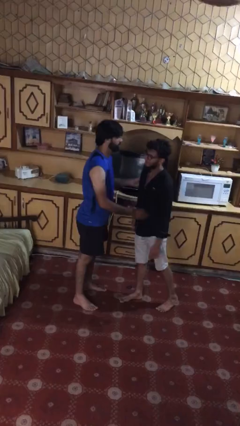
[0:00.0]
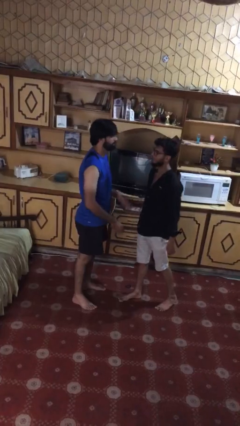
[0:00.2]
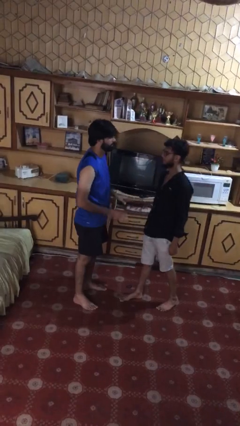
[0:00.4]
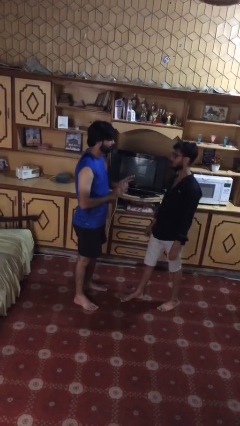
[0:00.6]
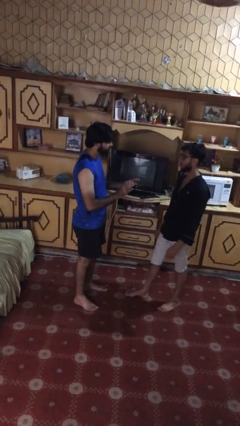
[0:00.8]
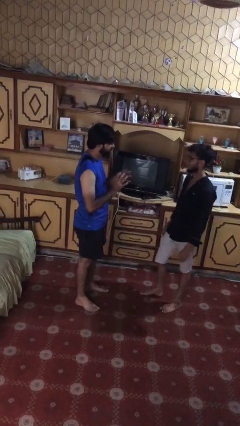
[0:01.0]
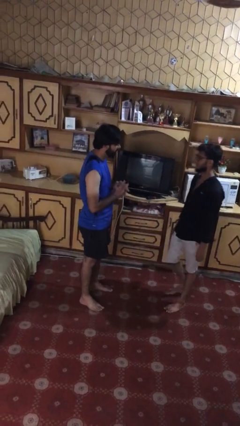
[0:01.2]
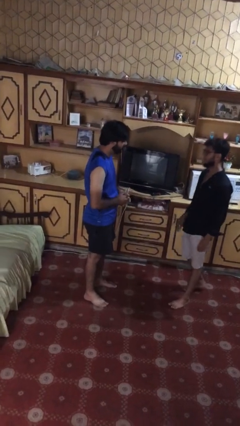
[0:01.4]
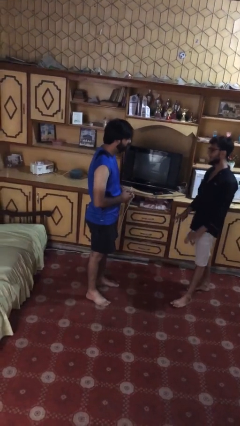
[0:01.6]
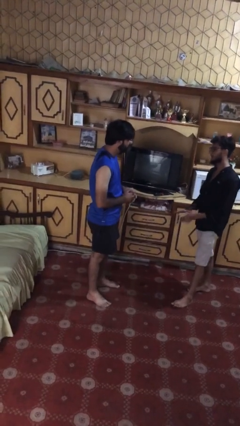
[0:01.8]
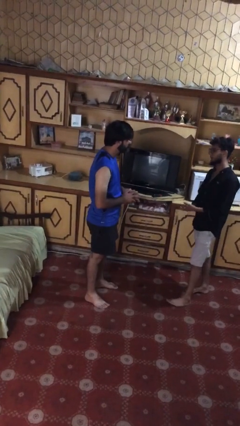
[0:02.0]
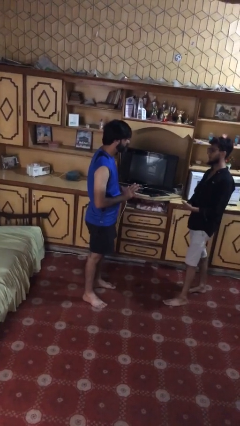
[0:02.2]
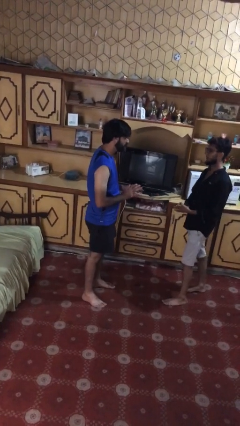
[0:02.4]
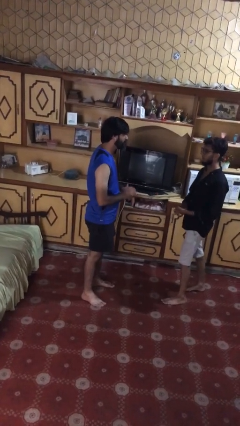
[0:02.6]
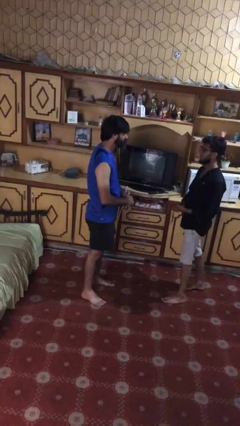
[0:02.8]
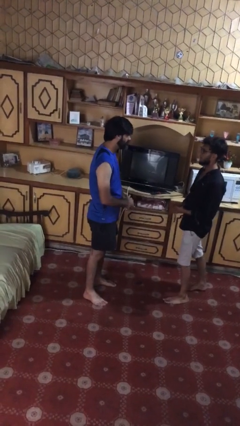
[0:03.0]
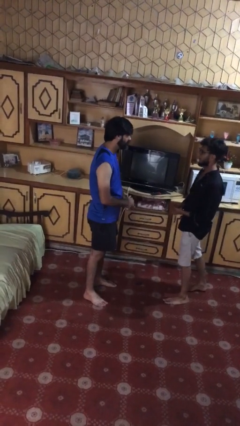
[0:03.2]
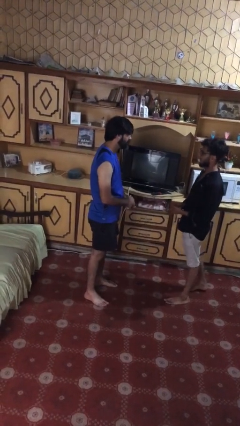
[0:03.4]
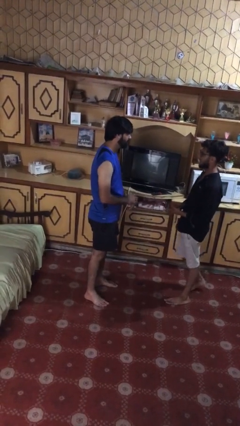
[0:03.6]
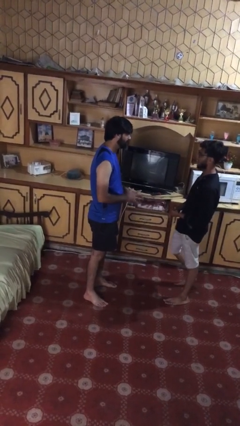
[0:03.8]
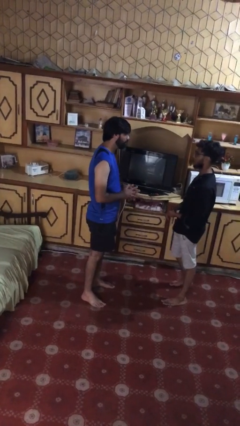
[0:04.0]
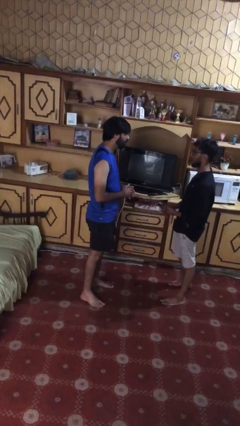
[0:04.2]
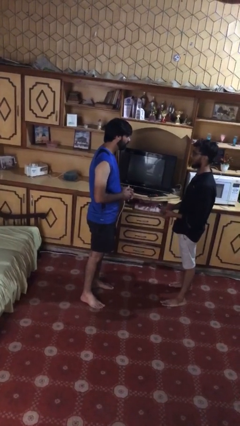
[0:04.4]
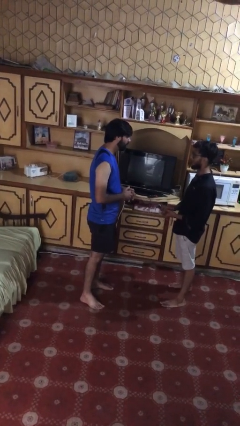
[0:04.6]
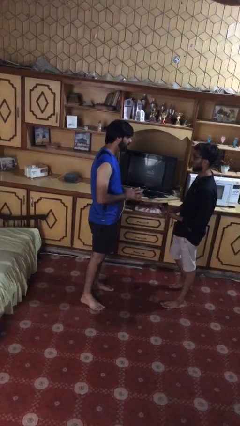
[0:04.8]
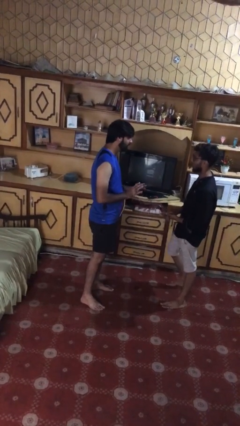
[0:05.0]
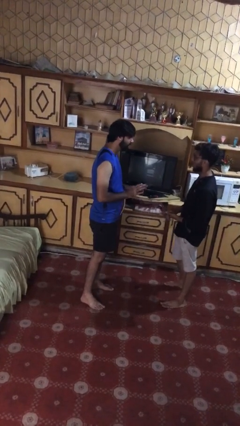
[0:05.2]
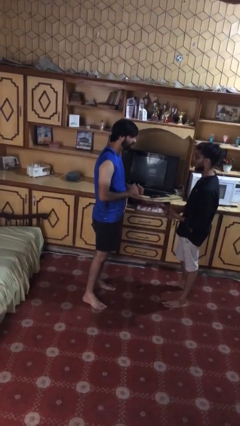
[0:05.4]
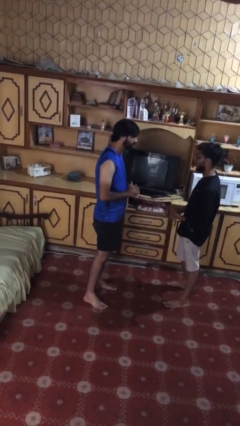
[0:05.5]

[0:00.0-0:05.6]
person talks to person

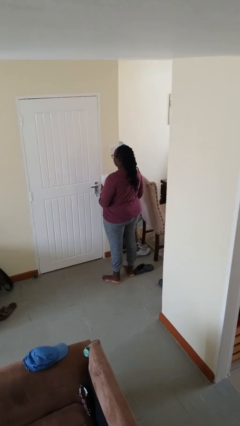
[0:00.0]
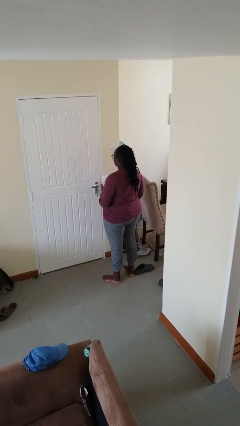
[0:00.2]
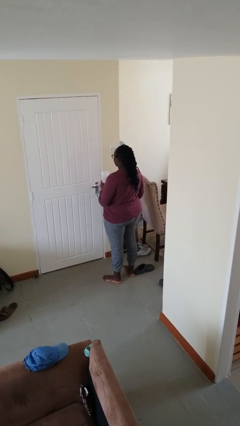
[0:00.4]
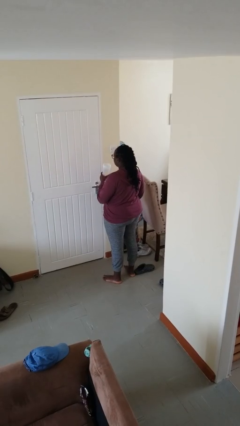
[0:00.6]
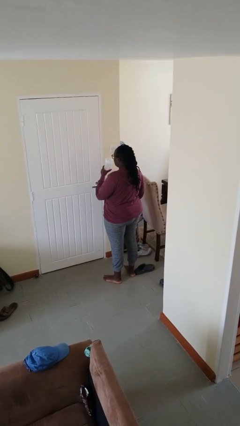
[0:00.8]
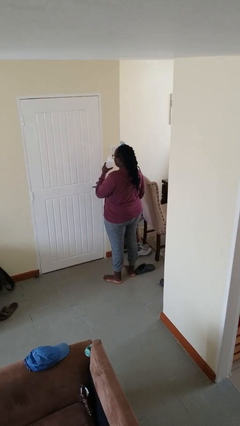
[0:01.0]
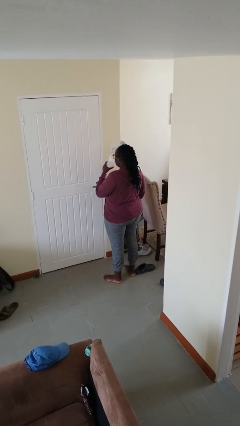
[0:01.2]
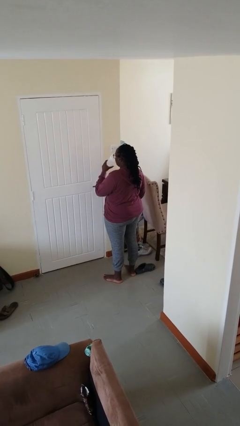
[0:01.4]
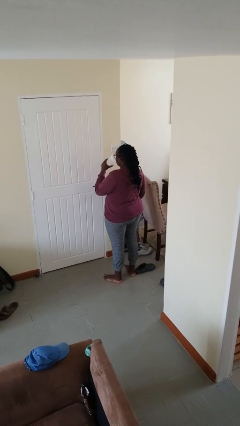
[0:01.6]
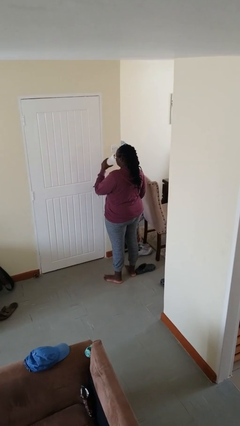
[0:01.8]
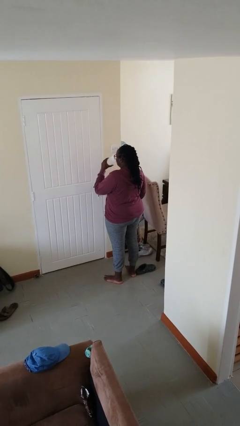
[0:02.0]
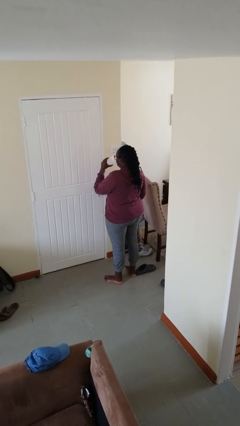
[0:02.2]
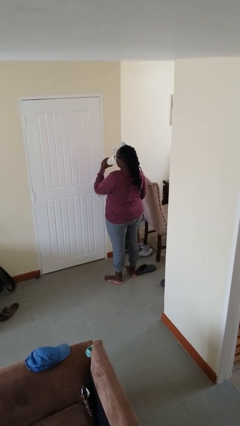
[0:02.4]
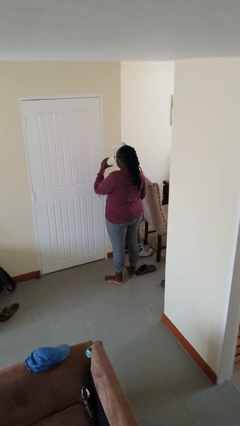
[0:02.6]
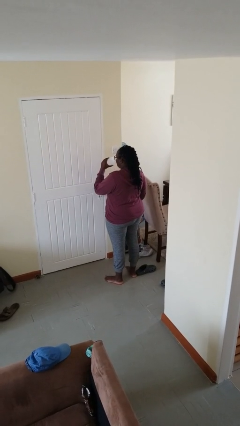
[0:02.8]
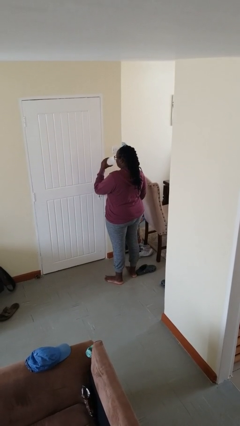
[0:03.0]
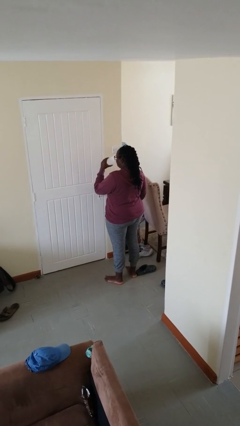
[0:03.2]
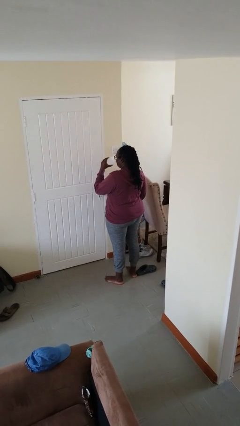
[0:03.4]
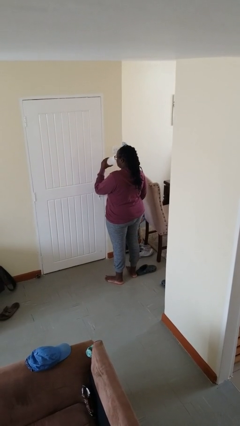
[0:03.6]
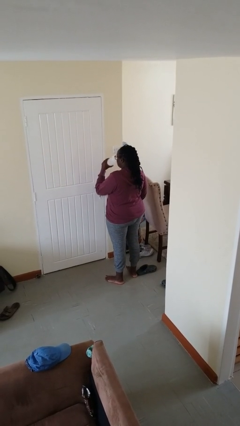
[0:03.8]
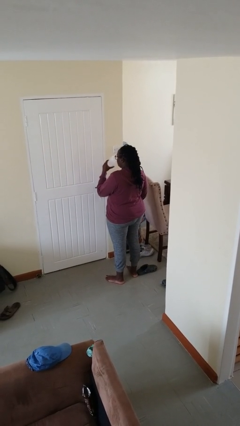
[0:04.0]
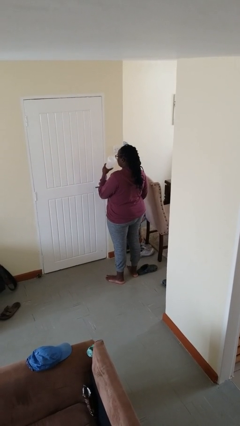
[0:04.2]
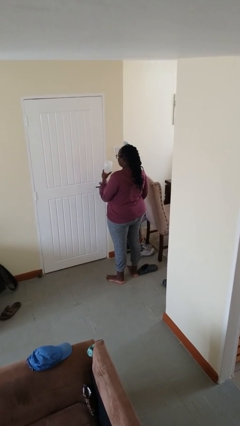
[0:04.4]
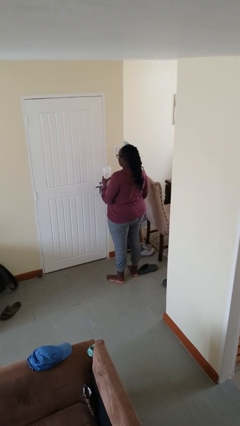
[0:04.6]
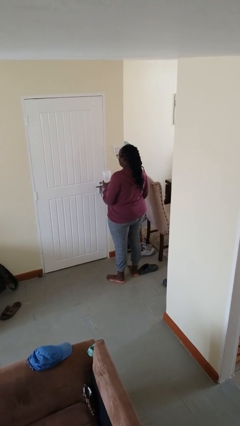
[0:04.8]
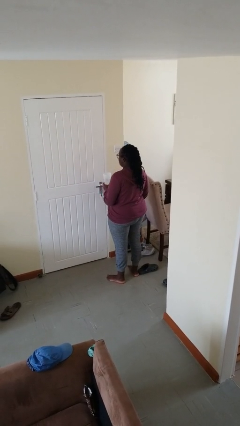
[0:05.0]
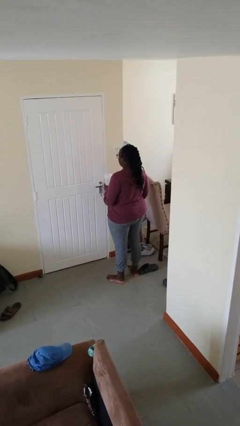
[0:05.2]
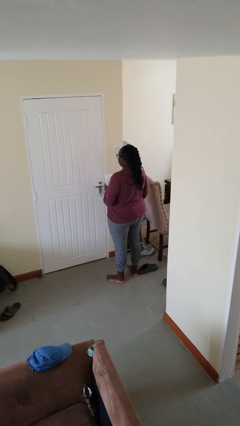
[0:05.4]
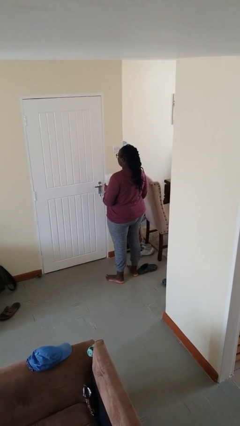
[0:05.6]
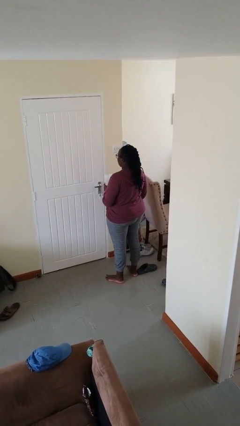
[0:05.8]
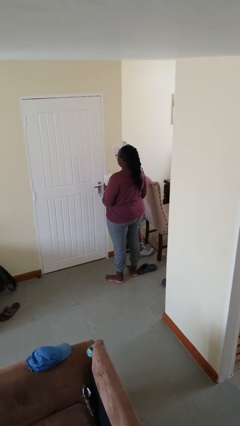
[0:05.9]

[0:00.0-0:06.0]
person drinks from bottle

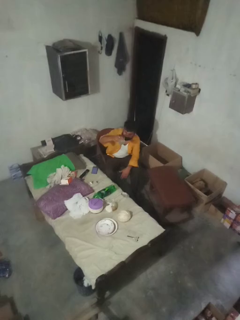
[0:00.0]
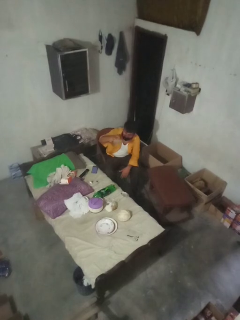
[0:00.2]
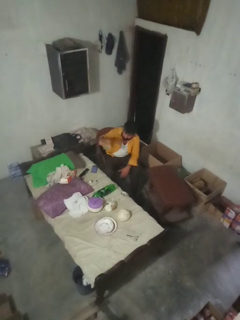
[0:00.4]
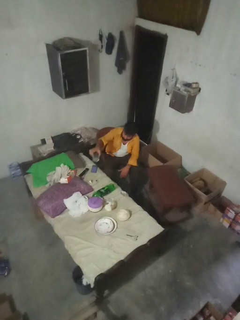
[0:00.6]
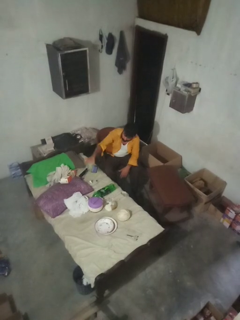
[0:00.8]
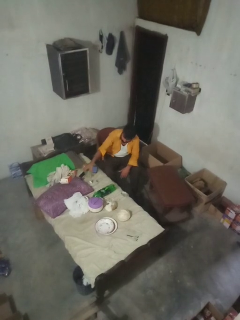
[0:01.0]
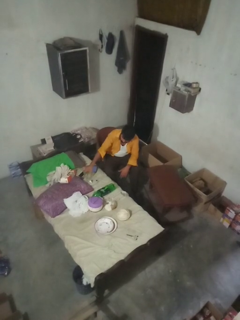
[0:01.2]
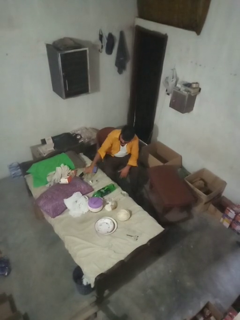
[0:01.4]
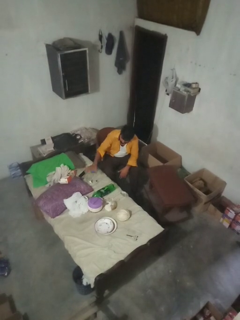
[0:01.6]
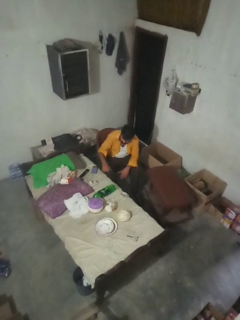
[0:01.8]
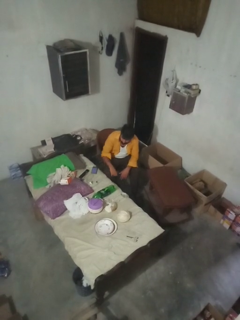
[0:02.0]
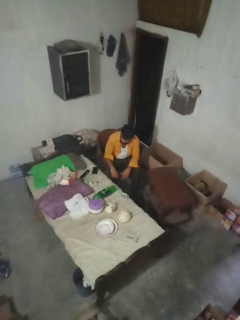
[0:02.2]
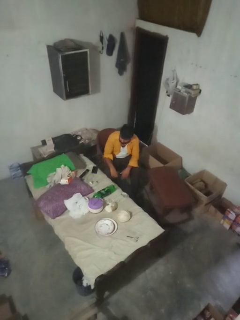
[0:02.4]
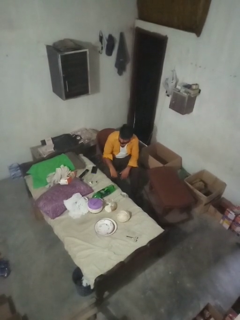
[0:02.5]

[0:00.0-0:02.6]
person puts down object on bed

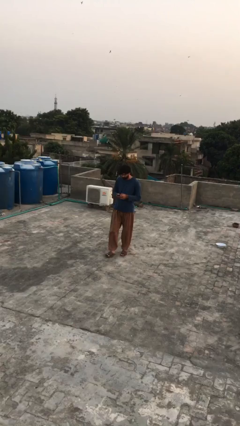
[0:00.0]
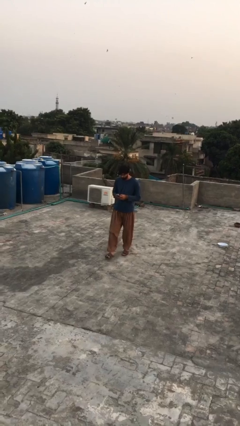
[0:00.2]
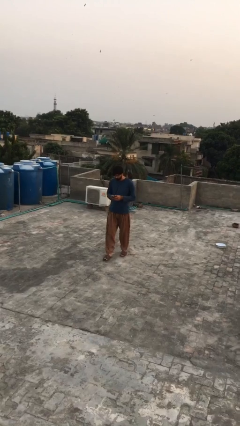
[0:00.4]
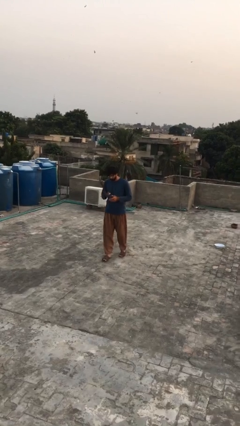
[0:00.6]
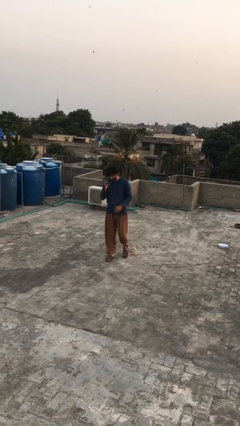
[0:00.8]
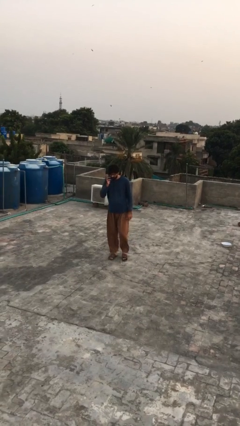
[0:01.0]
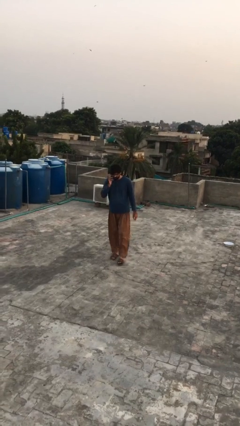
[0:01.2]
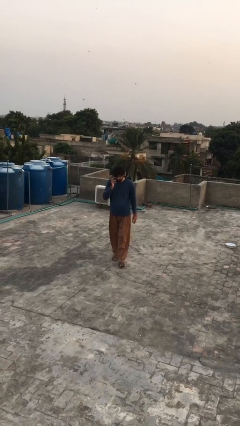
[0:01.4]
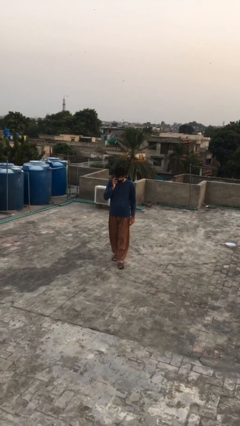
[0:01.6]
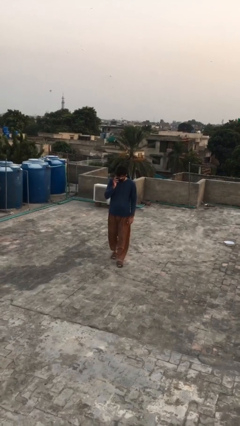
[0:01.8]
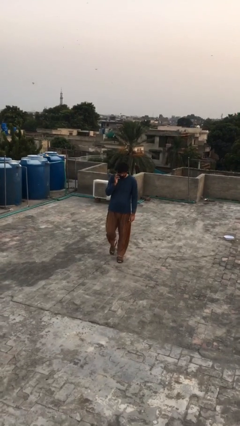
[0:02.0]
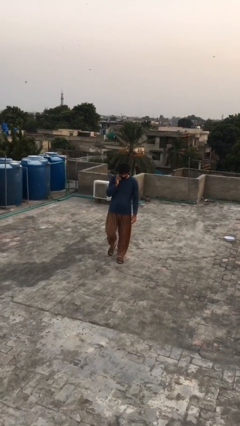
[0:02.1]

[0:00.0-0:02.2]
person talks on phone

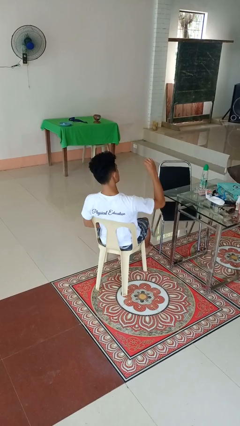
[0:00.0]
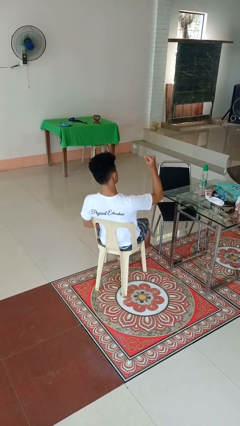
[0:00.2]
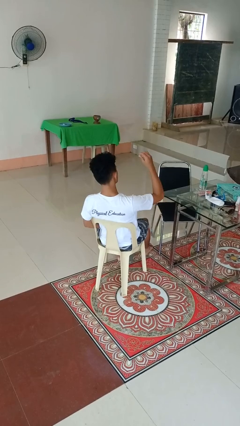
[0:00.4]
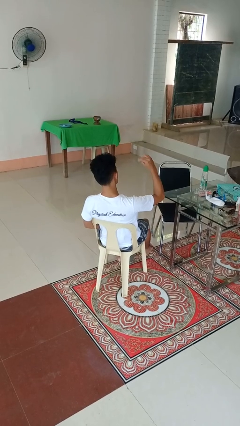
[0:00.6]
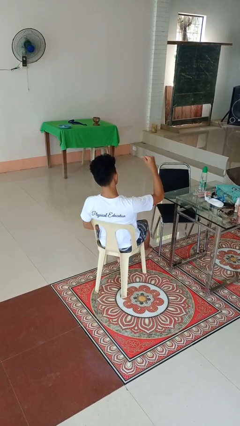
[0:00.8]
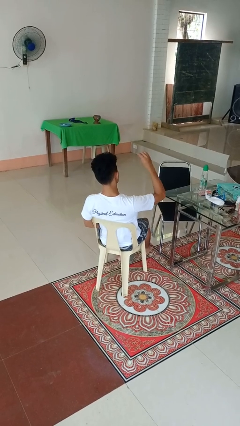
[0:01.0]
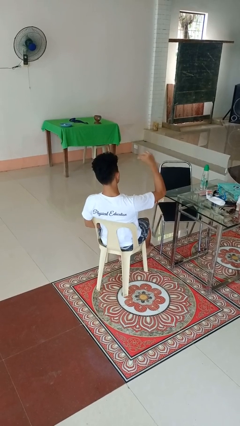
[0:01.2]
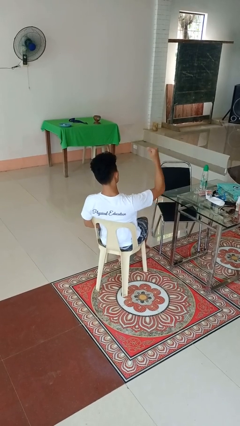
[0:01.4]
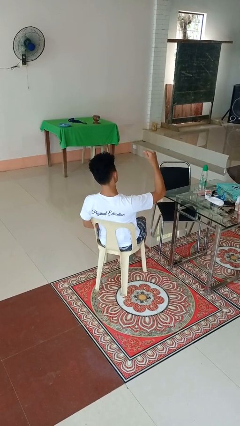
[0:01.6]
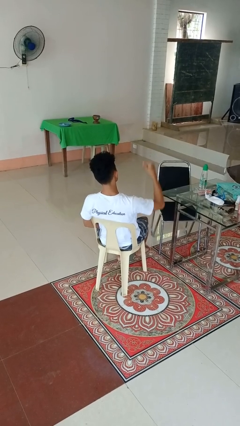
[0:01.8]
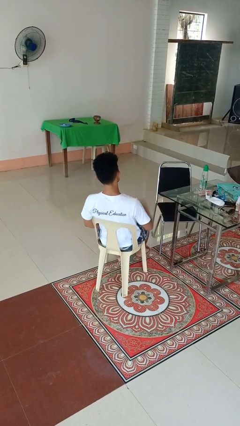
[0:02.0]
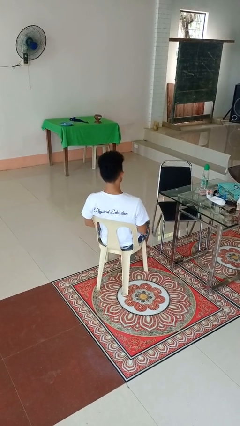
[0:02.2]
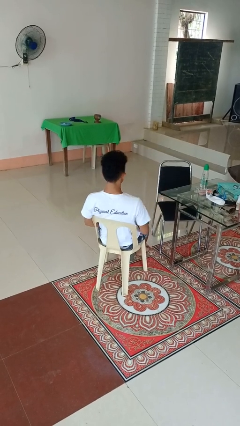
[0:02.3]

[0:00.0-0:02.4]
person snaps fingers
